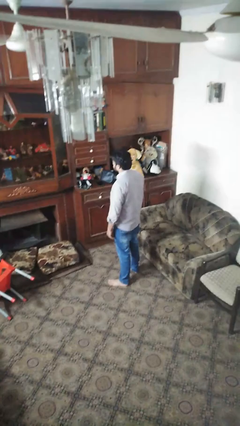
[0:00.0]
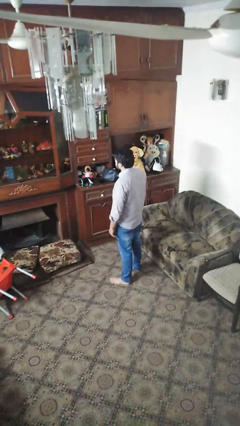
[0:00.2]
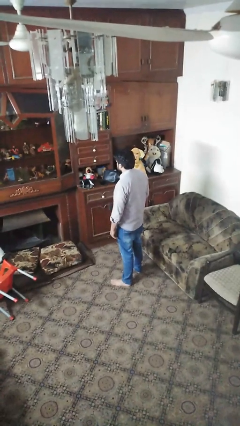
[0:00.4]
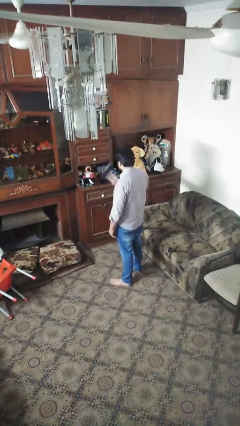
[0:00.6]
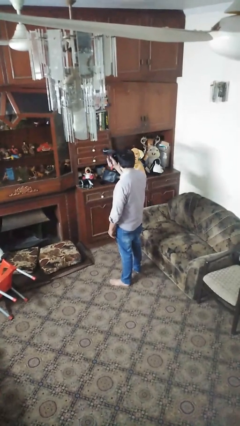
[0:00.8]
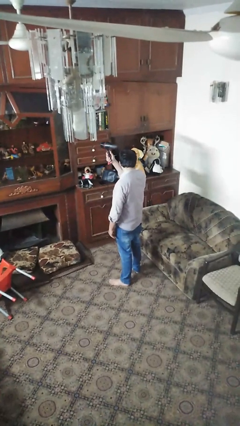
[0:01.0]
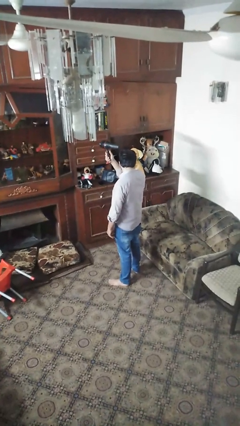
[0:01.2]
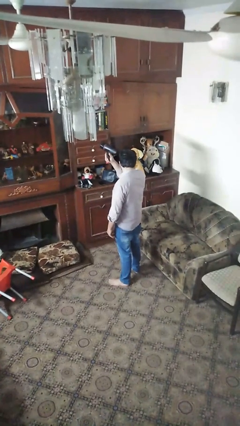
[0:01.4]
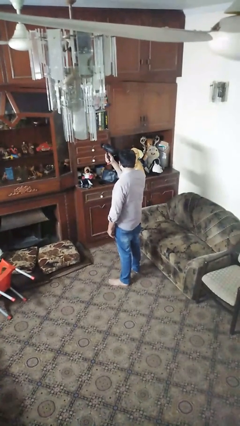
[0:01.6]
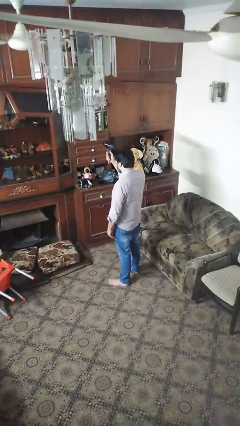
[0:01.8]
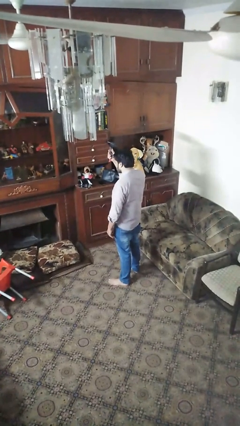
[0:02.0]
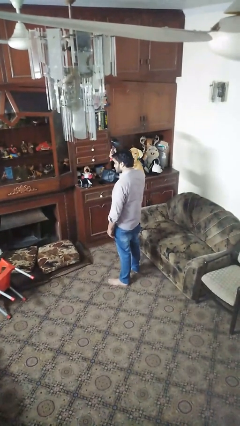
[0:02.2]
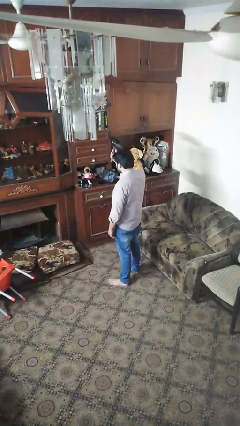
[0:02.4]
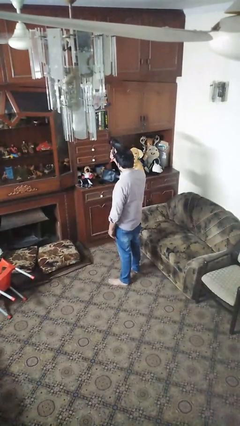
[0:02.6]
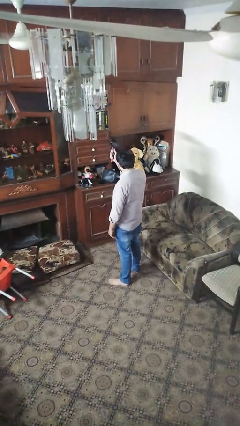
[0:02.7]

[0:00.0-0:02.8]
person dries hair with hairdryer

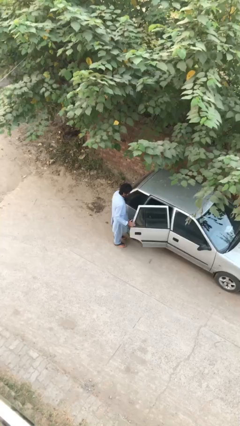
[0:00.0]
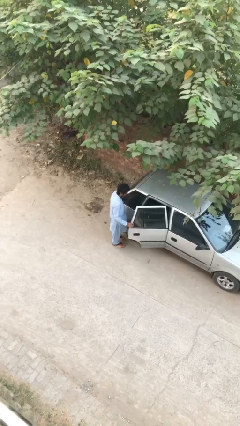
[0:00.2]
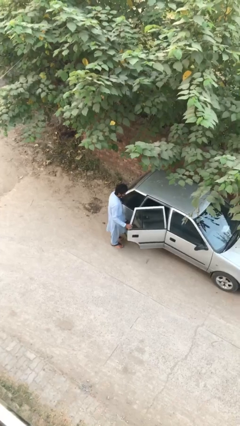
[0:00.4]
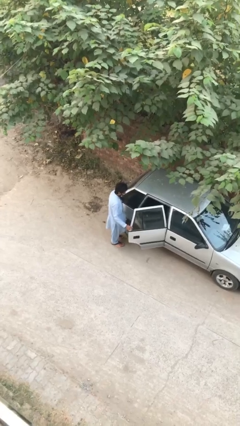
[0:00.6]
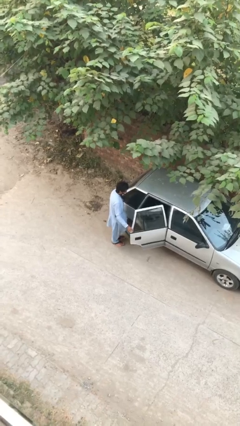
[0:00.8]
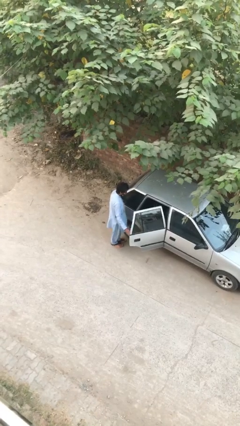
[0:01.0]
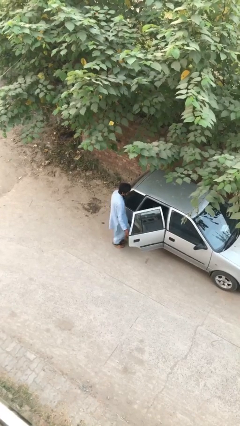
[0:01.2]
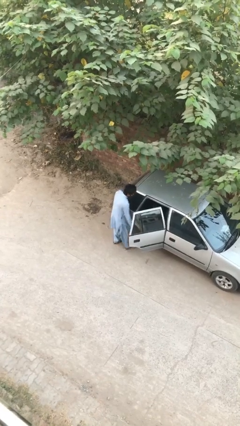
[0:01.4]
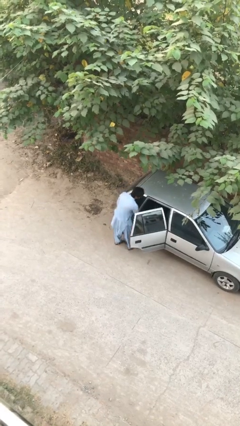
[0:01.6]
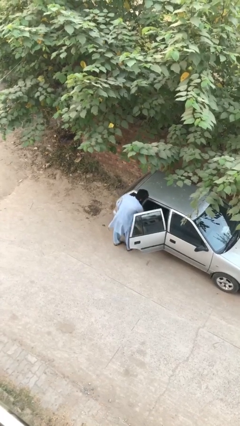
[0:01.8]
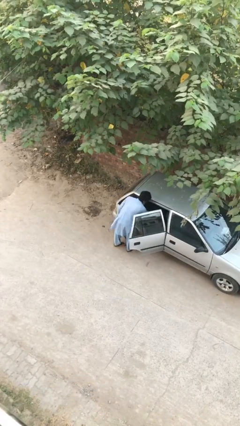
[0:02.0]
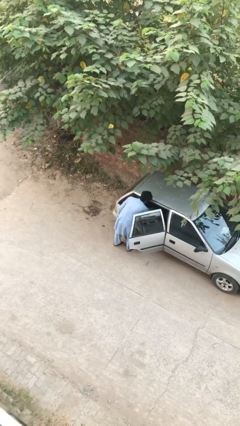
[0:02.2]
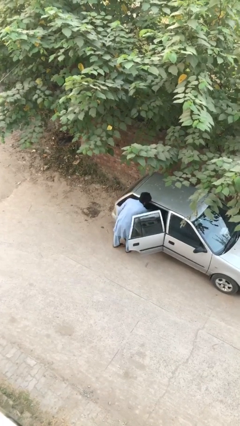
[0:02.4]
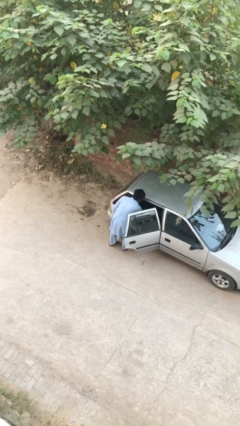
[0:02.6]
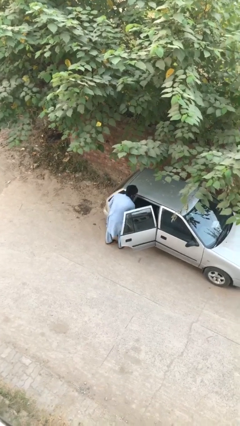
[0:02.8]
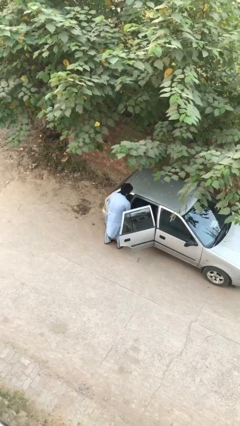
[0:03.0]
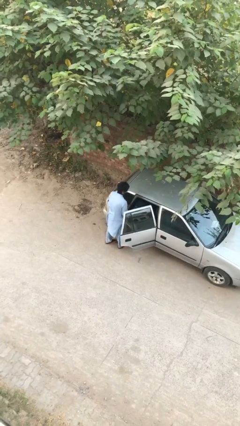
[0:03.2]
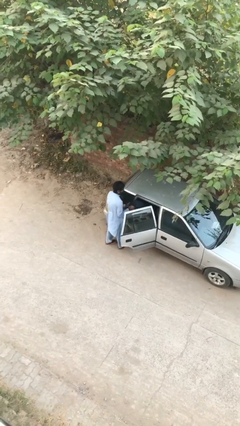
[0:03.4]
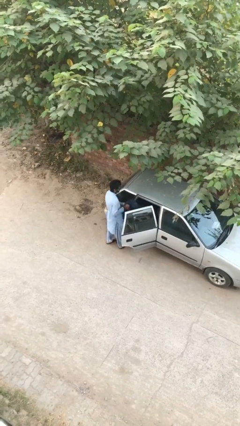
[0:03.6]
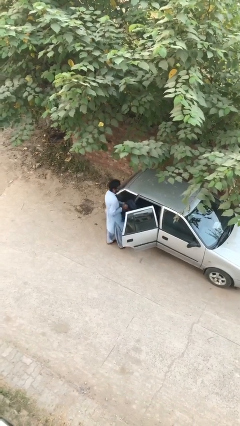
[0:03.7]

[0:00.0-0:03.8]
person unloads car

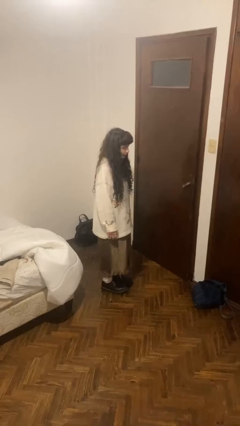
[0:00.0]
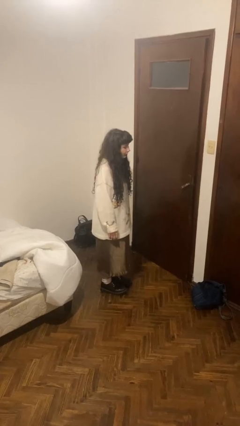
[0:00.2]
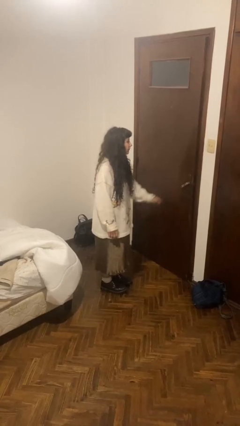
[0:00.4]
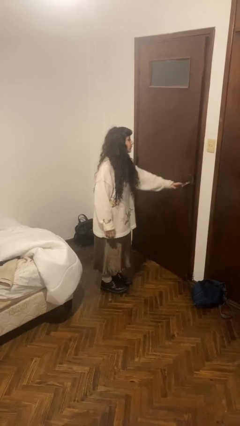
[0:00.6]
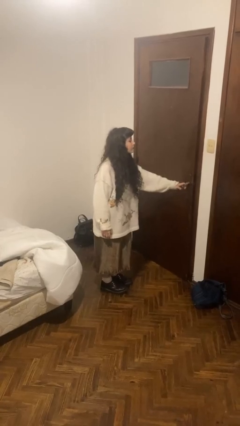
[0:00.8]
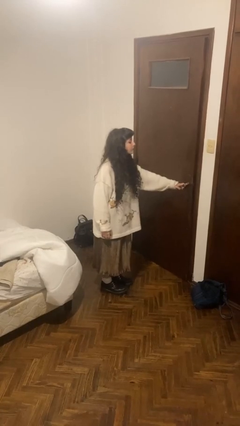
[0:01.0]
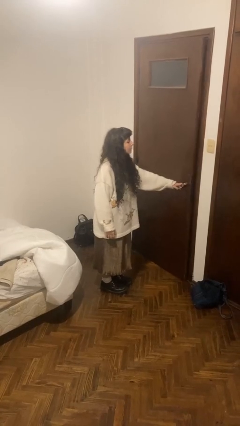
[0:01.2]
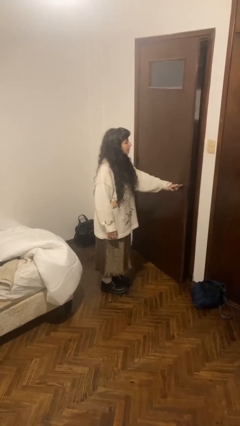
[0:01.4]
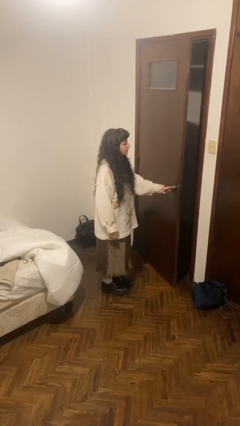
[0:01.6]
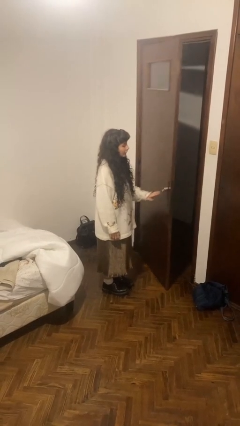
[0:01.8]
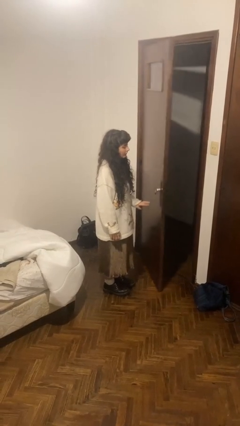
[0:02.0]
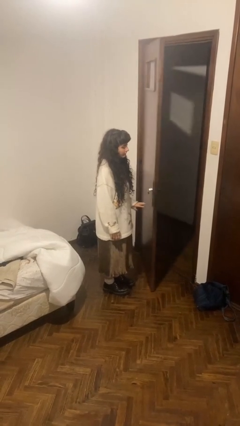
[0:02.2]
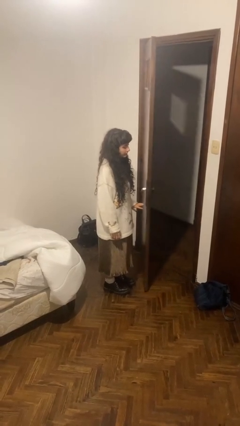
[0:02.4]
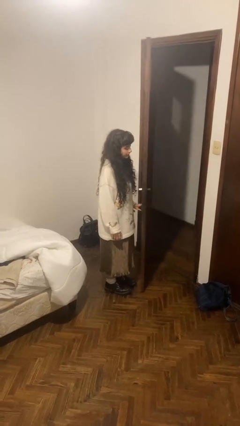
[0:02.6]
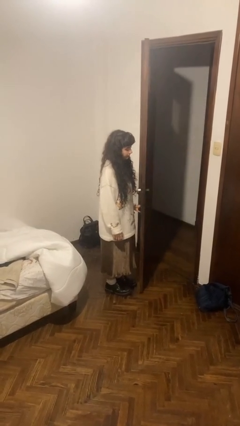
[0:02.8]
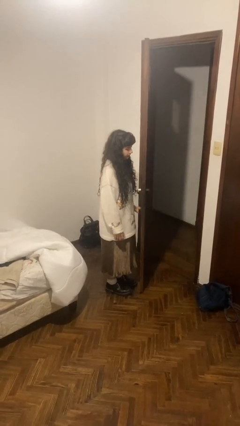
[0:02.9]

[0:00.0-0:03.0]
person opens facility door

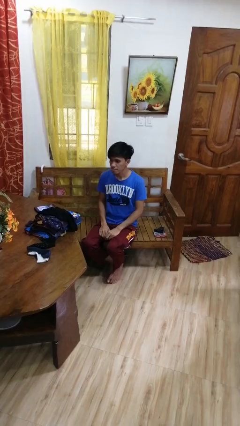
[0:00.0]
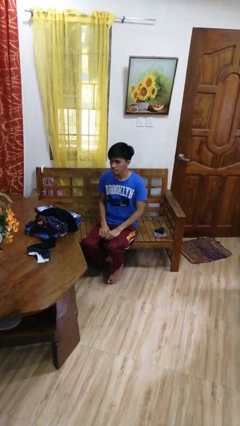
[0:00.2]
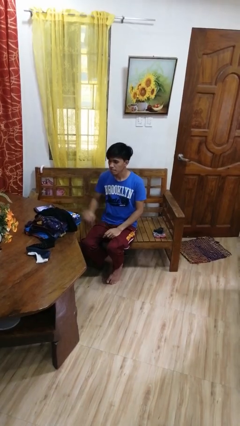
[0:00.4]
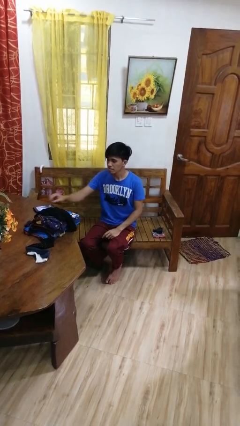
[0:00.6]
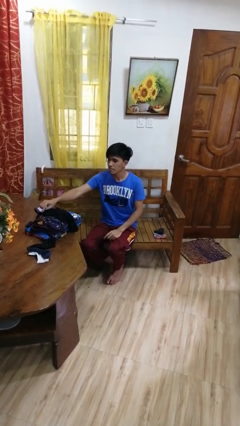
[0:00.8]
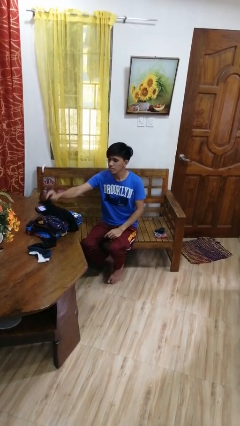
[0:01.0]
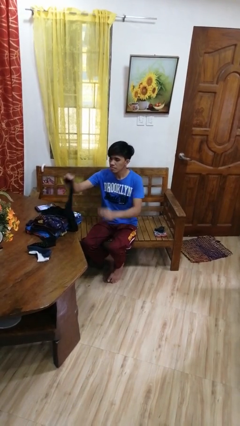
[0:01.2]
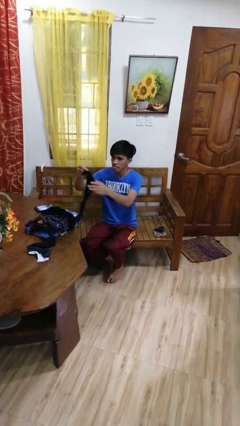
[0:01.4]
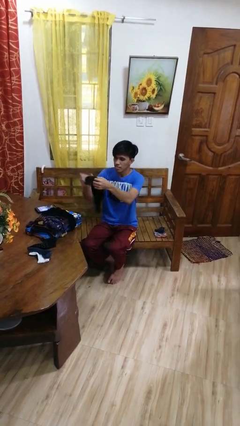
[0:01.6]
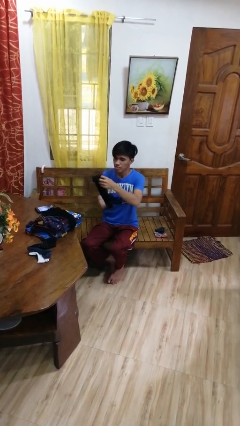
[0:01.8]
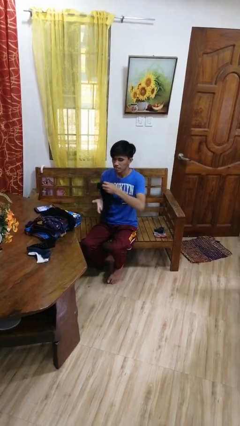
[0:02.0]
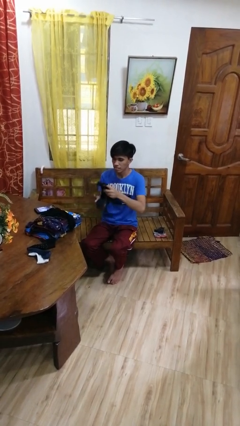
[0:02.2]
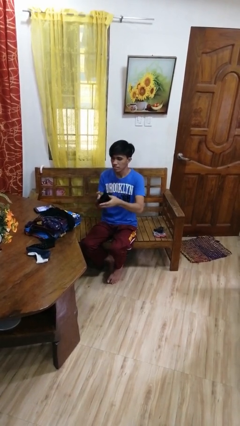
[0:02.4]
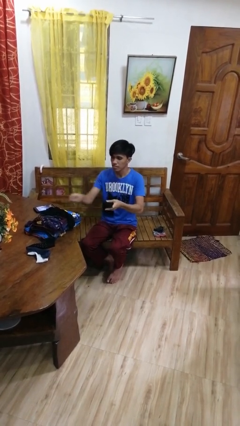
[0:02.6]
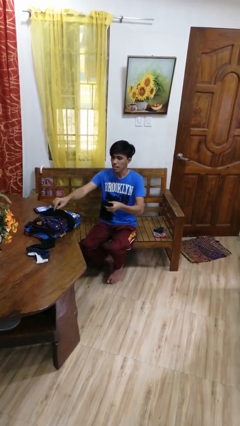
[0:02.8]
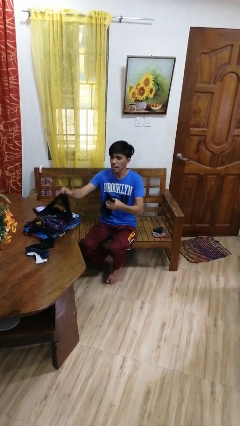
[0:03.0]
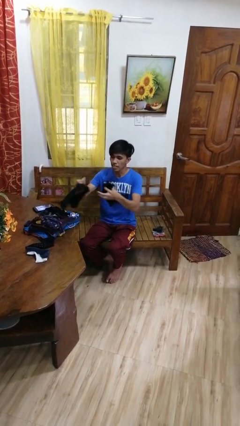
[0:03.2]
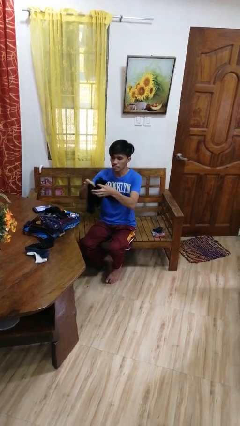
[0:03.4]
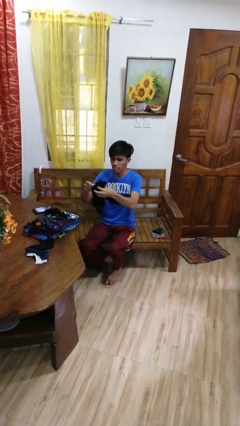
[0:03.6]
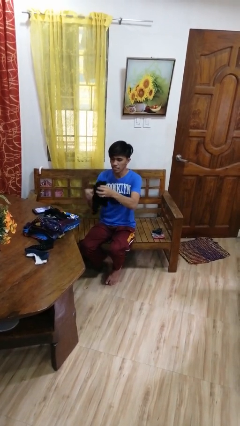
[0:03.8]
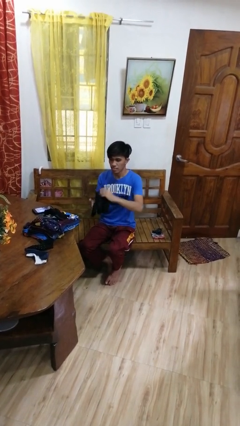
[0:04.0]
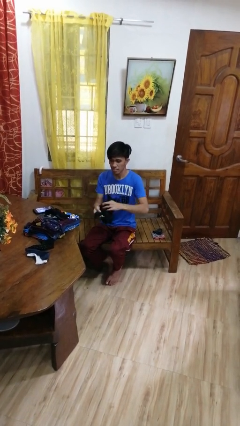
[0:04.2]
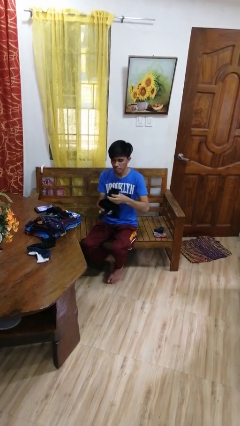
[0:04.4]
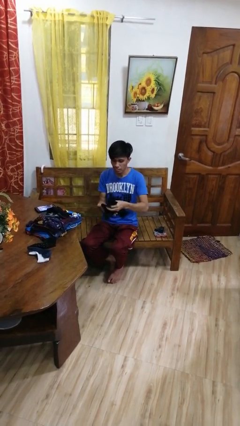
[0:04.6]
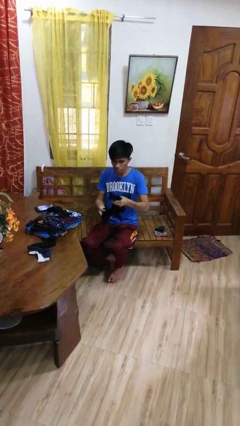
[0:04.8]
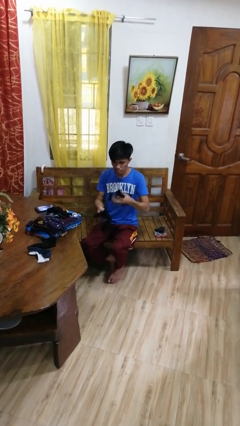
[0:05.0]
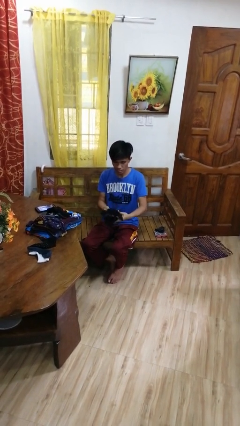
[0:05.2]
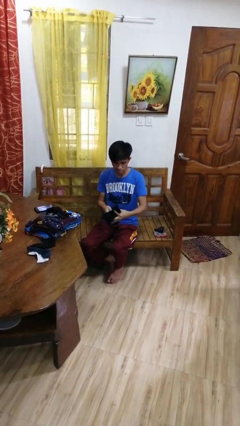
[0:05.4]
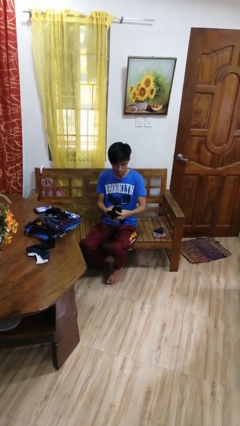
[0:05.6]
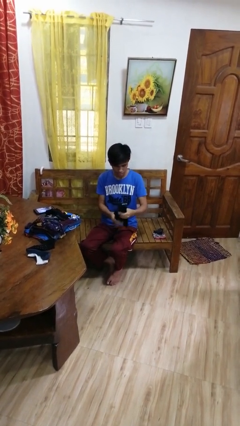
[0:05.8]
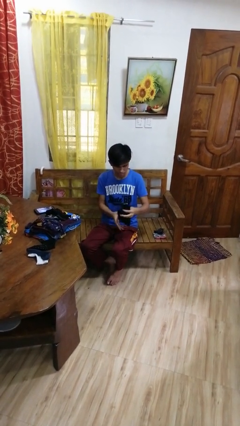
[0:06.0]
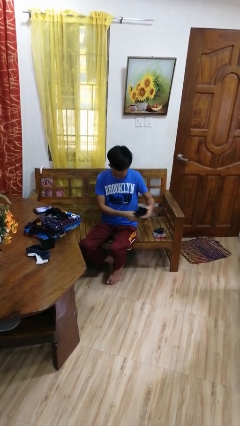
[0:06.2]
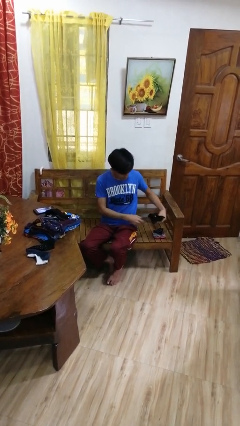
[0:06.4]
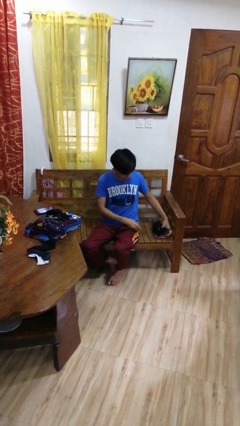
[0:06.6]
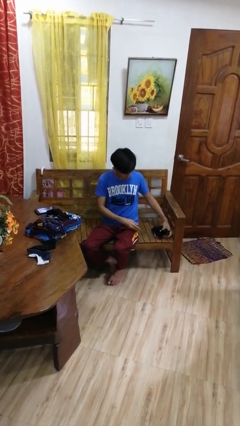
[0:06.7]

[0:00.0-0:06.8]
person folds socks

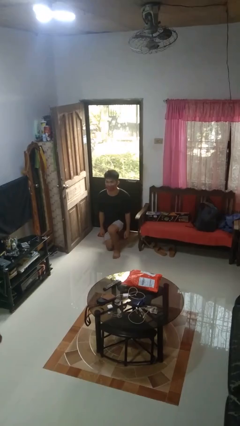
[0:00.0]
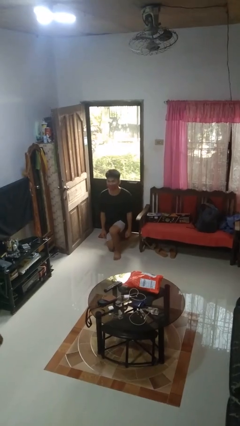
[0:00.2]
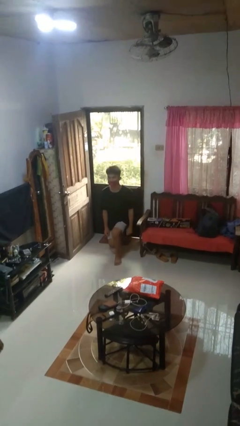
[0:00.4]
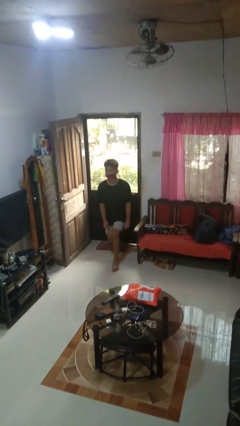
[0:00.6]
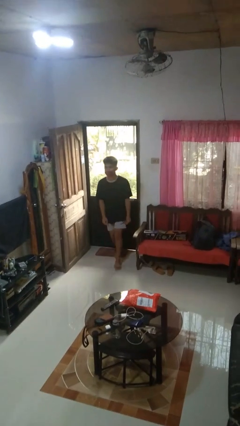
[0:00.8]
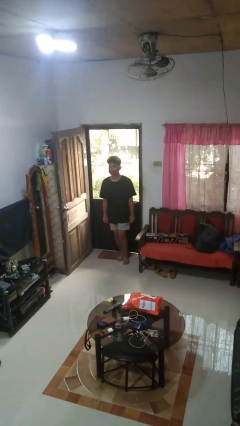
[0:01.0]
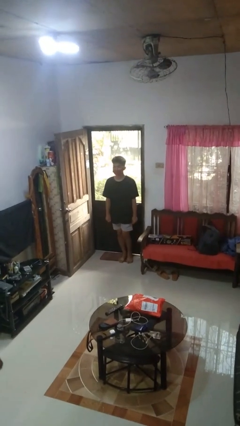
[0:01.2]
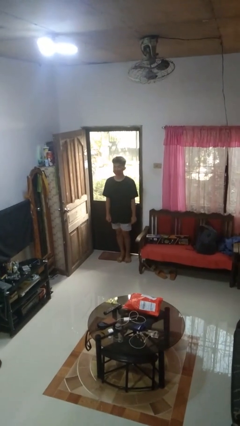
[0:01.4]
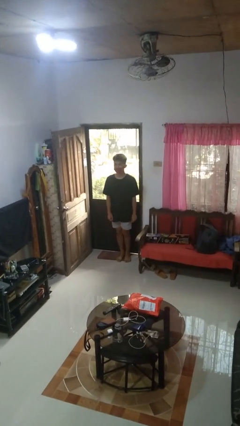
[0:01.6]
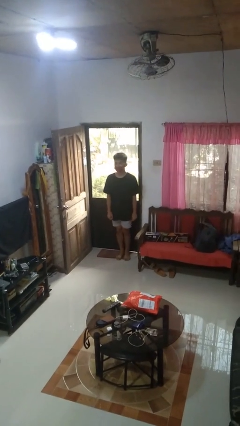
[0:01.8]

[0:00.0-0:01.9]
person stands up from floor
